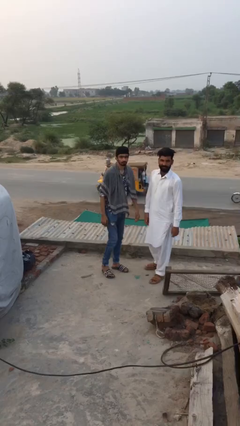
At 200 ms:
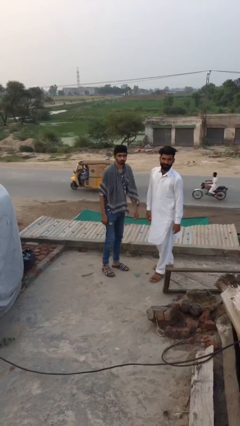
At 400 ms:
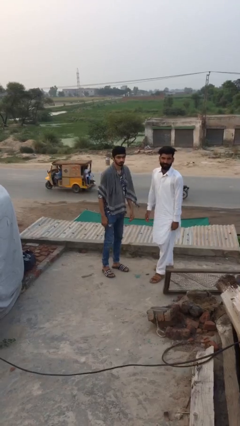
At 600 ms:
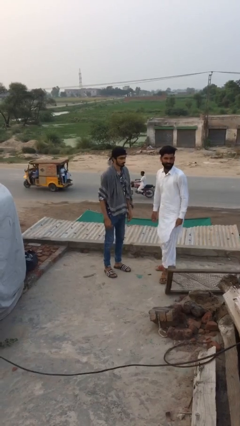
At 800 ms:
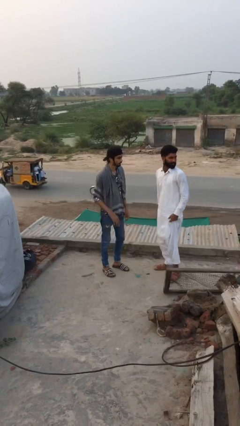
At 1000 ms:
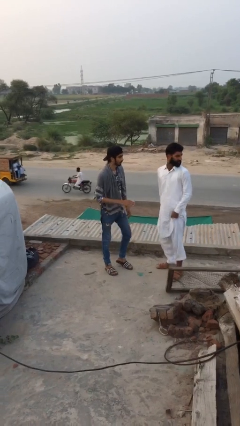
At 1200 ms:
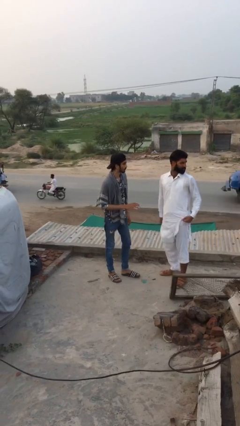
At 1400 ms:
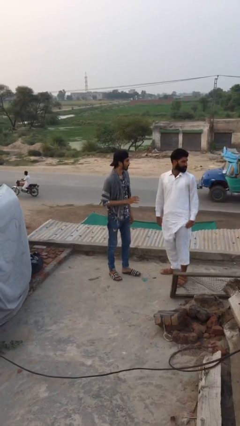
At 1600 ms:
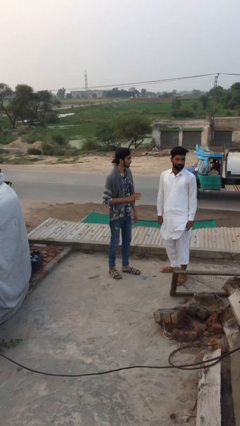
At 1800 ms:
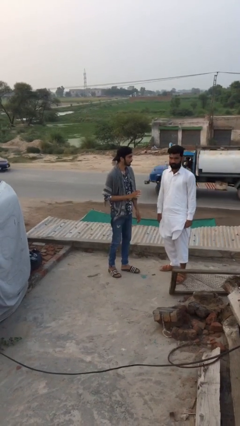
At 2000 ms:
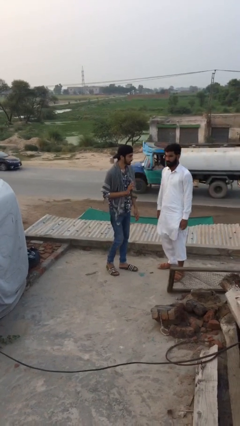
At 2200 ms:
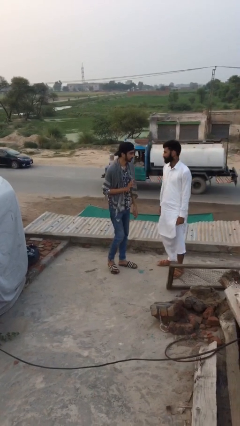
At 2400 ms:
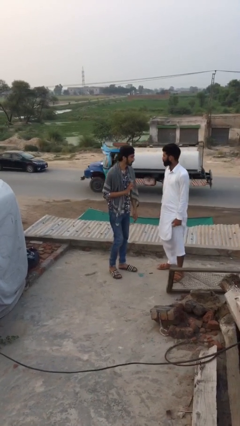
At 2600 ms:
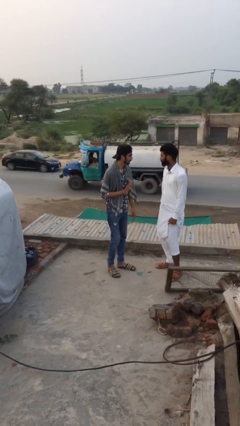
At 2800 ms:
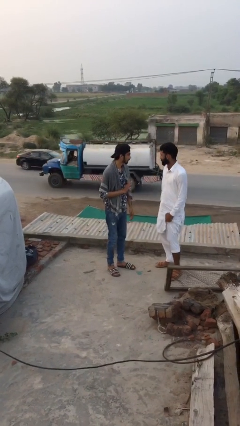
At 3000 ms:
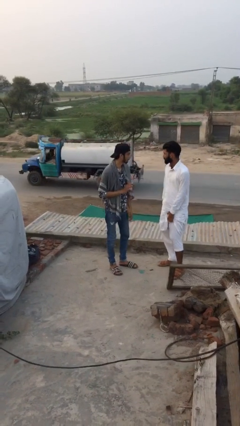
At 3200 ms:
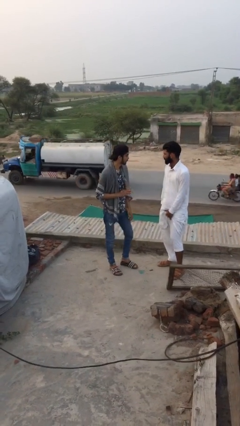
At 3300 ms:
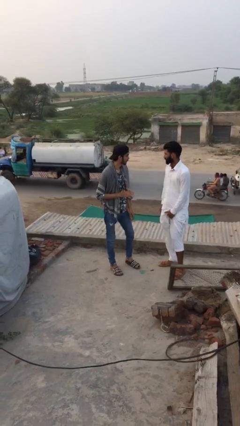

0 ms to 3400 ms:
person talks to person

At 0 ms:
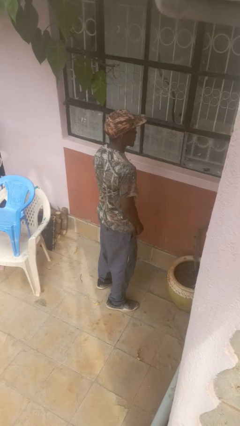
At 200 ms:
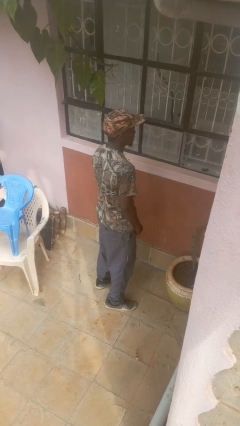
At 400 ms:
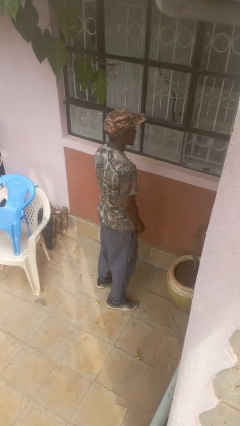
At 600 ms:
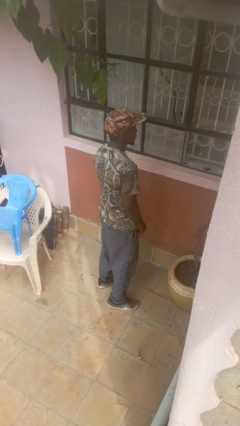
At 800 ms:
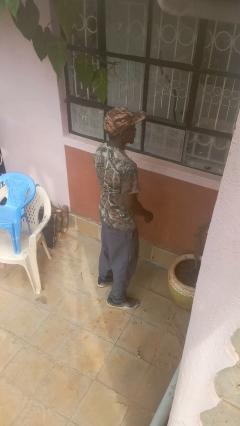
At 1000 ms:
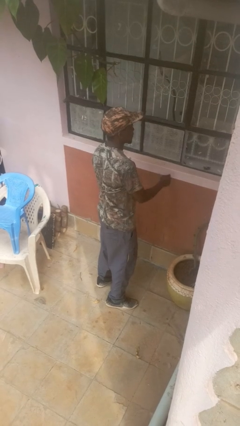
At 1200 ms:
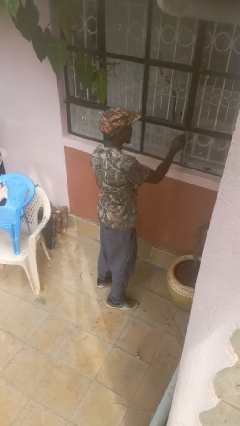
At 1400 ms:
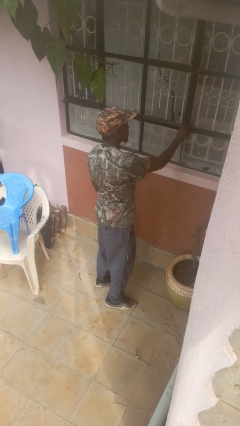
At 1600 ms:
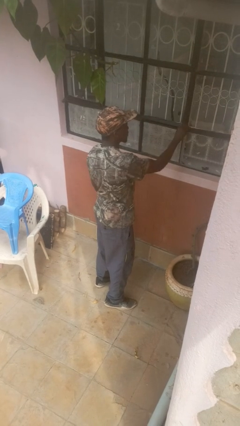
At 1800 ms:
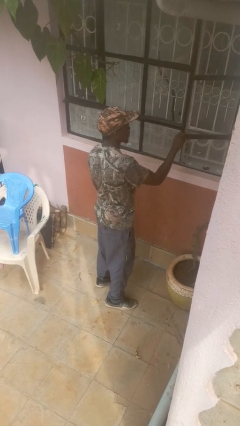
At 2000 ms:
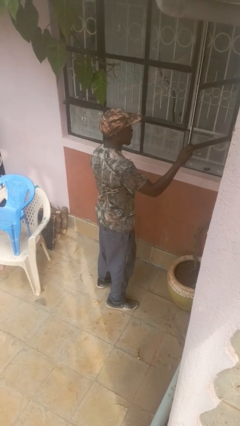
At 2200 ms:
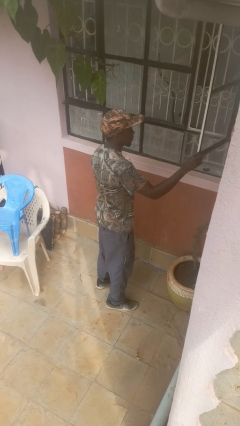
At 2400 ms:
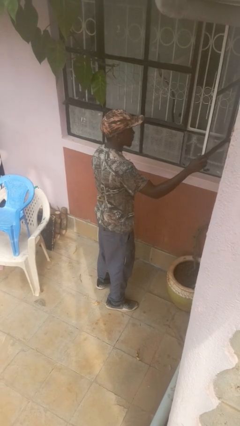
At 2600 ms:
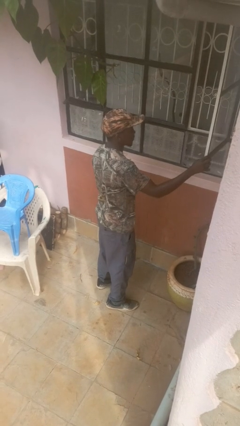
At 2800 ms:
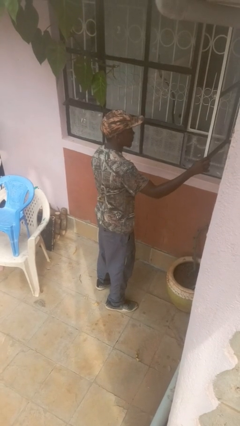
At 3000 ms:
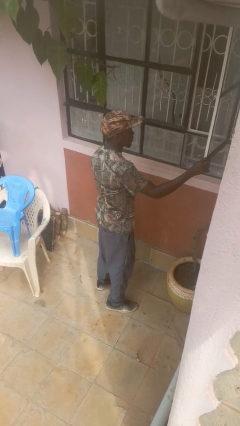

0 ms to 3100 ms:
person opens home window

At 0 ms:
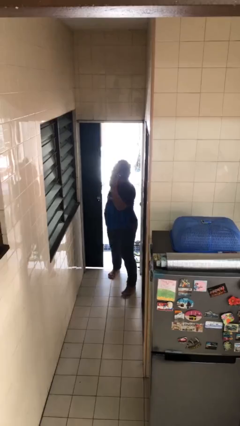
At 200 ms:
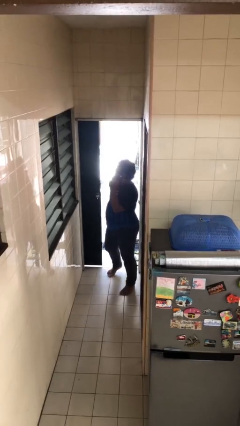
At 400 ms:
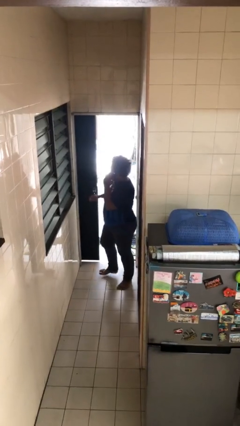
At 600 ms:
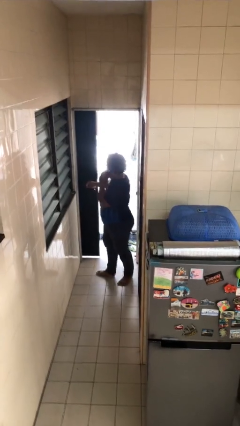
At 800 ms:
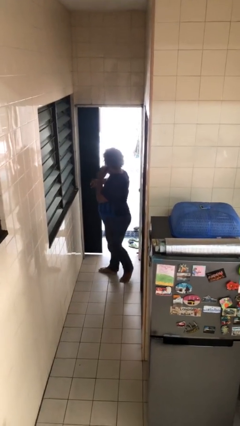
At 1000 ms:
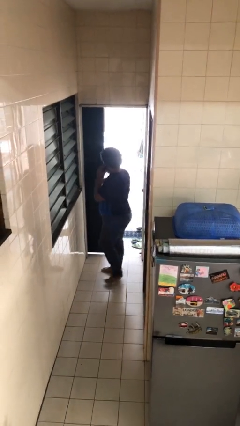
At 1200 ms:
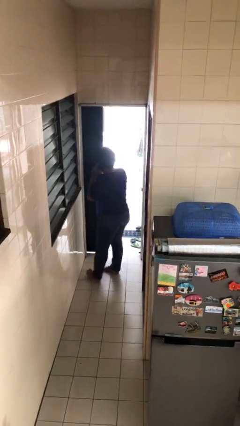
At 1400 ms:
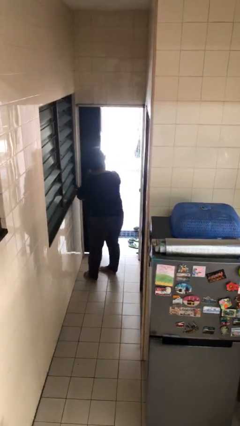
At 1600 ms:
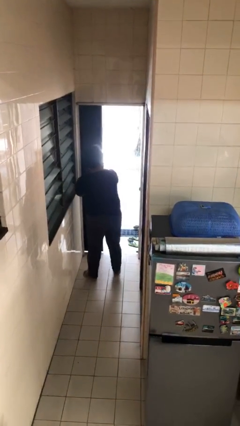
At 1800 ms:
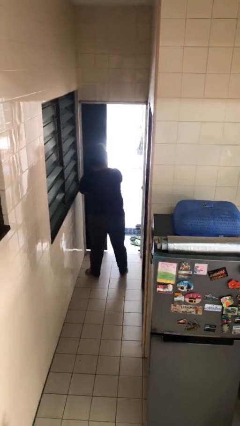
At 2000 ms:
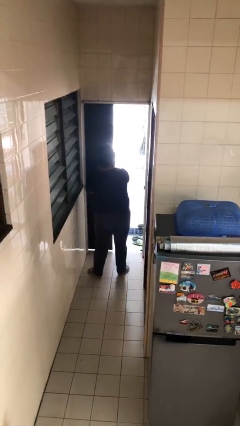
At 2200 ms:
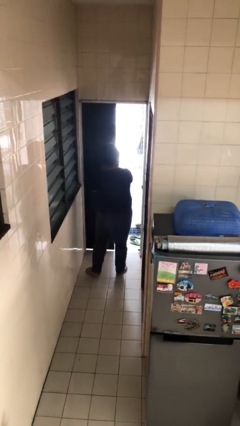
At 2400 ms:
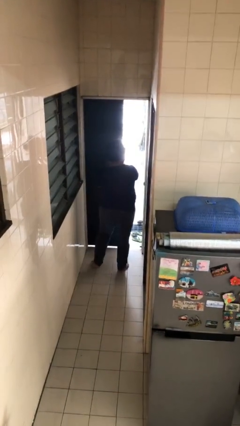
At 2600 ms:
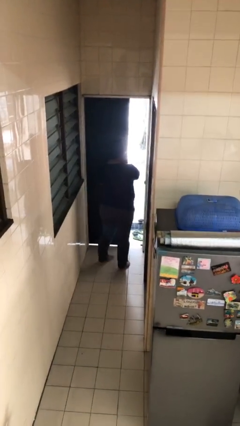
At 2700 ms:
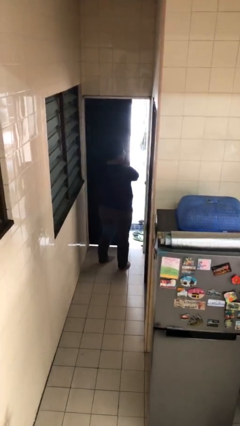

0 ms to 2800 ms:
person enters scene through structure

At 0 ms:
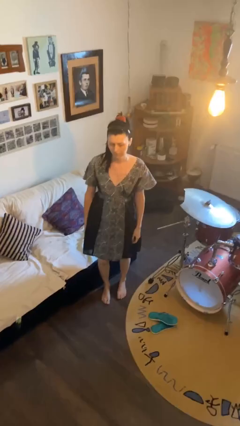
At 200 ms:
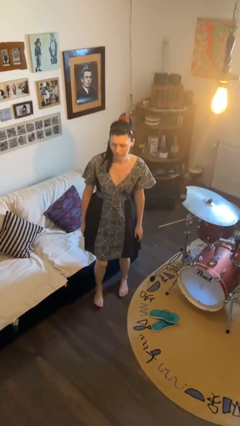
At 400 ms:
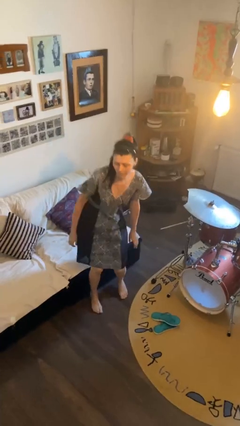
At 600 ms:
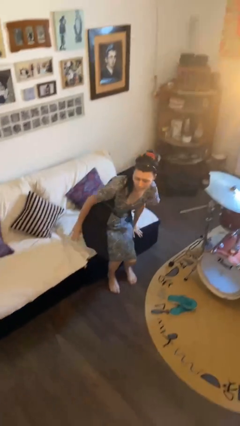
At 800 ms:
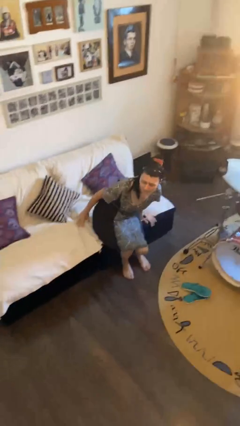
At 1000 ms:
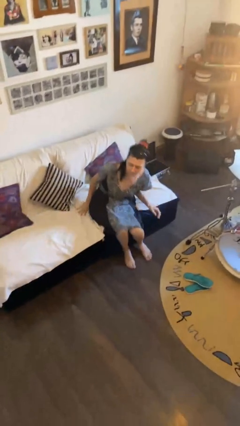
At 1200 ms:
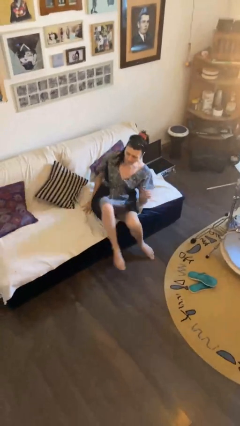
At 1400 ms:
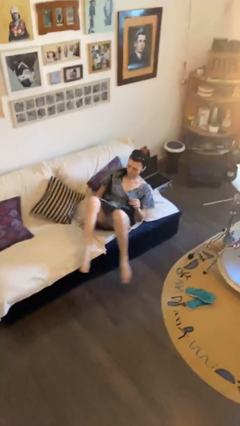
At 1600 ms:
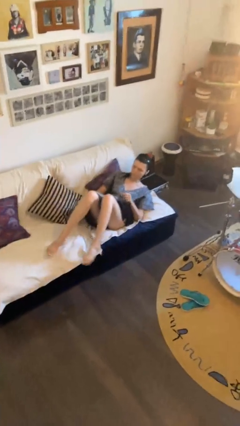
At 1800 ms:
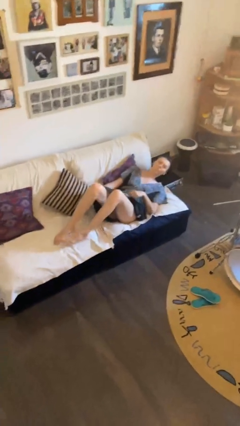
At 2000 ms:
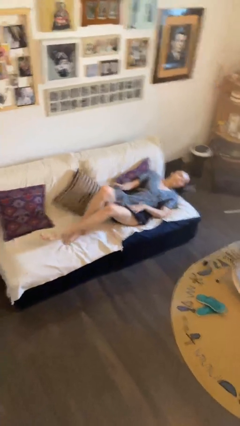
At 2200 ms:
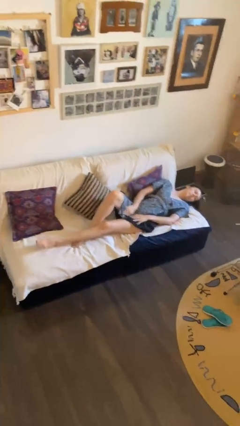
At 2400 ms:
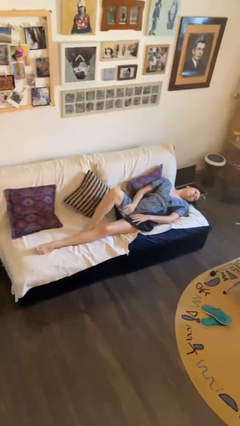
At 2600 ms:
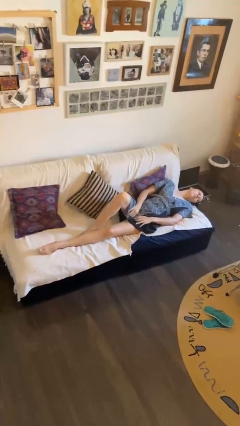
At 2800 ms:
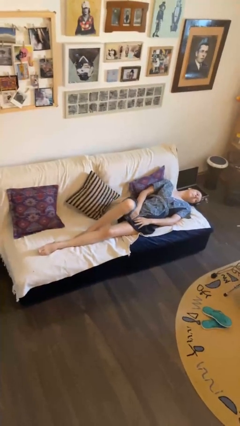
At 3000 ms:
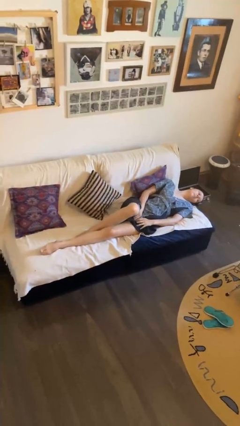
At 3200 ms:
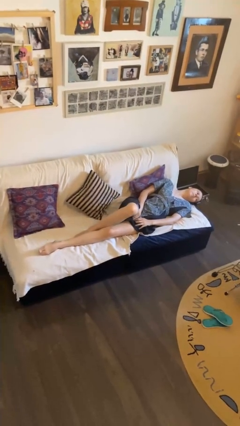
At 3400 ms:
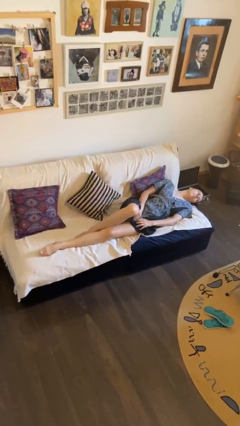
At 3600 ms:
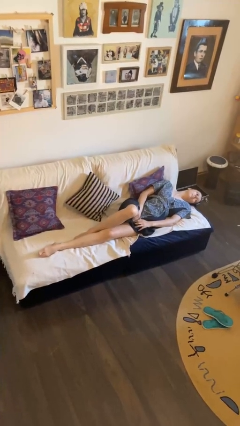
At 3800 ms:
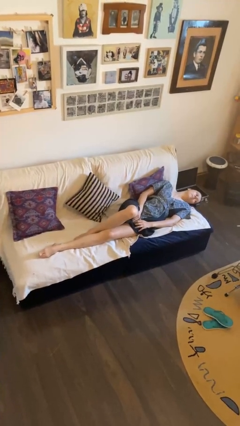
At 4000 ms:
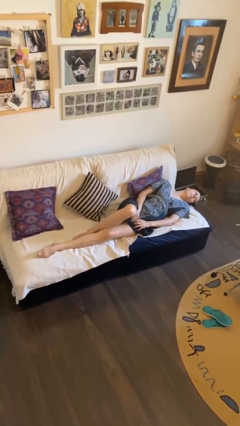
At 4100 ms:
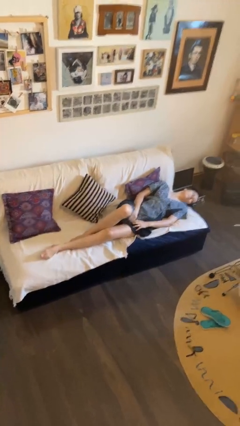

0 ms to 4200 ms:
person lies down on couch

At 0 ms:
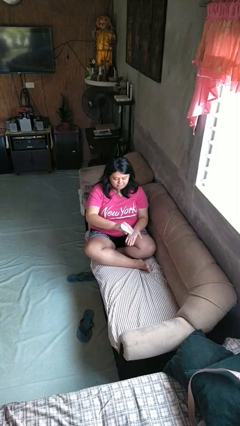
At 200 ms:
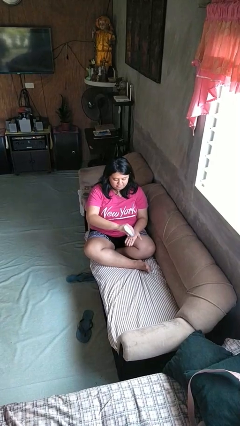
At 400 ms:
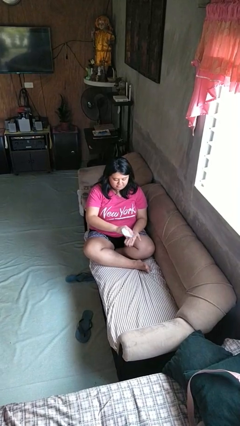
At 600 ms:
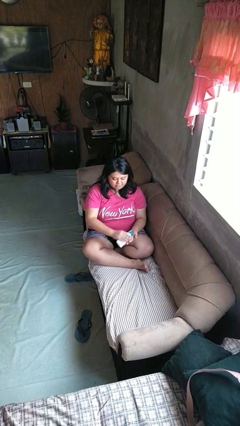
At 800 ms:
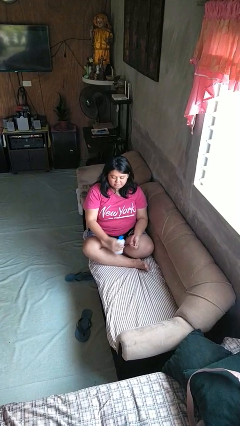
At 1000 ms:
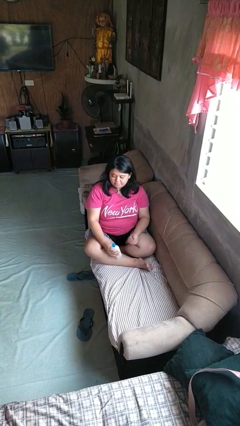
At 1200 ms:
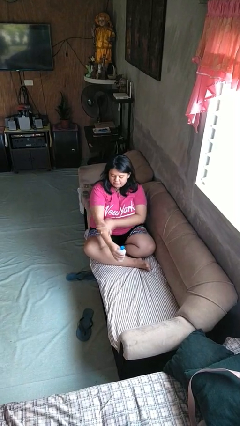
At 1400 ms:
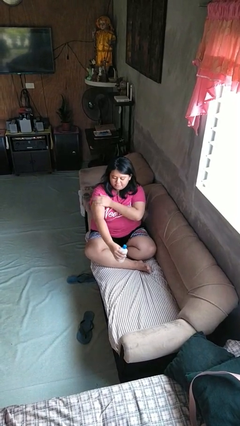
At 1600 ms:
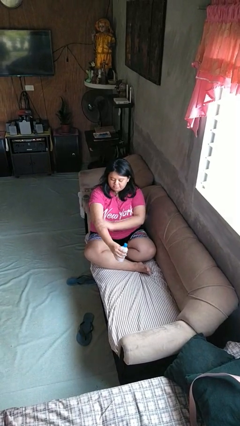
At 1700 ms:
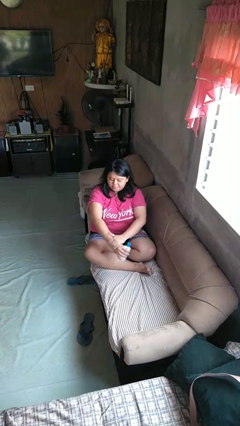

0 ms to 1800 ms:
person applies sunscreen

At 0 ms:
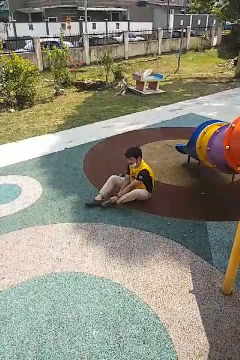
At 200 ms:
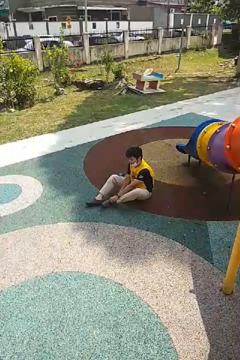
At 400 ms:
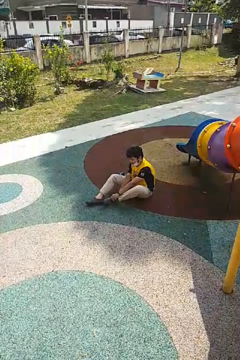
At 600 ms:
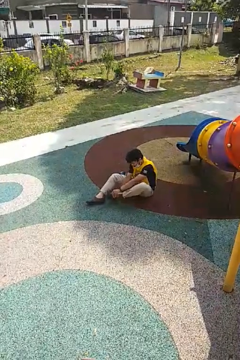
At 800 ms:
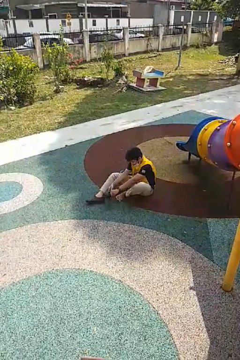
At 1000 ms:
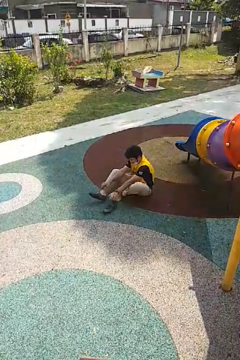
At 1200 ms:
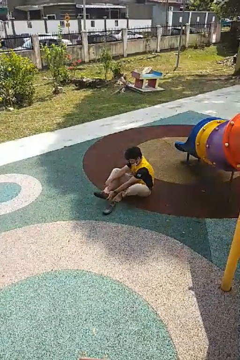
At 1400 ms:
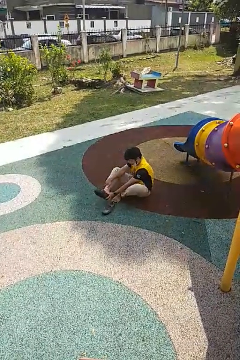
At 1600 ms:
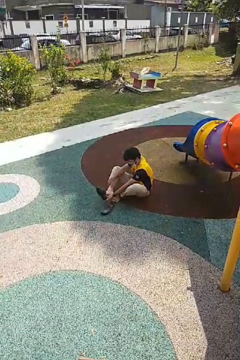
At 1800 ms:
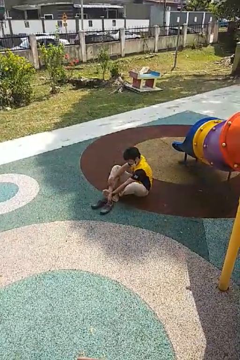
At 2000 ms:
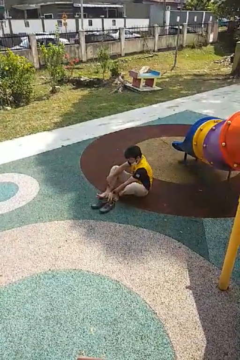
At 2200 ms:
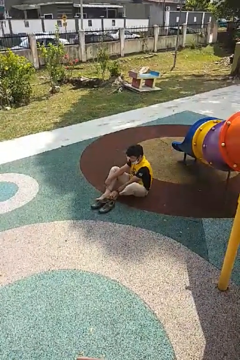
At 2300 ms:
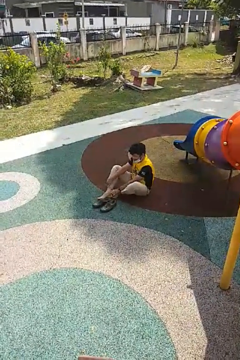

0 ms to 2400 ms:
person takes off shoes

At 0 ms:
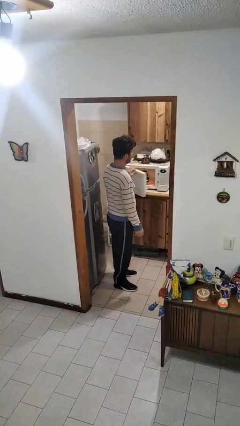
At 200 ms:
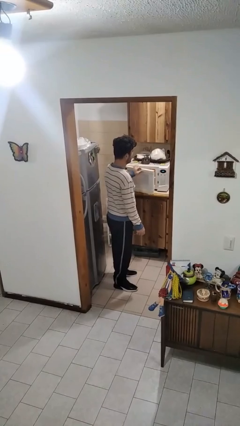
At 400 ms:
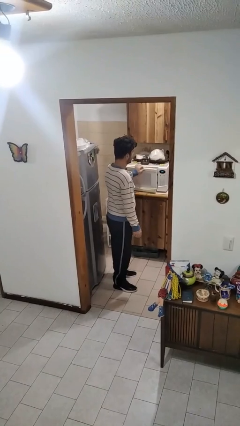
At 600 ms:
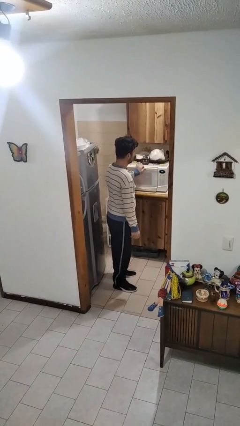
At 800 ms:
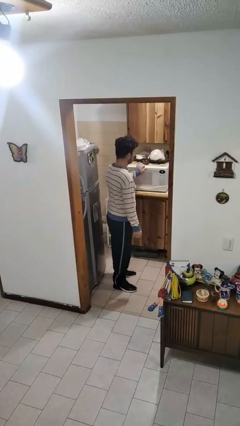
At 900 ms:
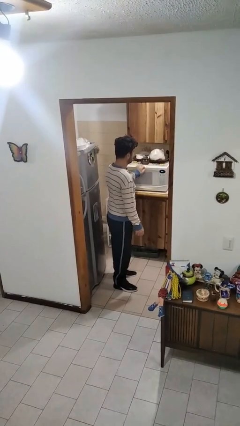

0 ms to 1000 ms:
person closes microwave
